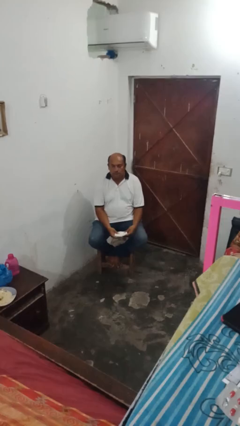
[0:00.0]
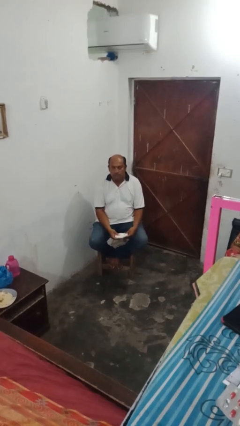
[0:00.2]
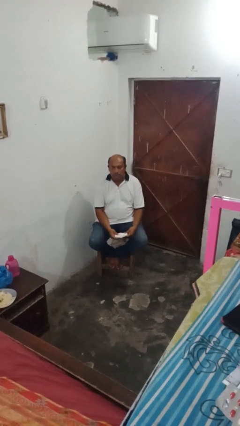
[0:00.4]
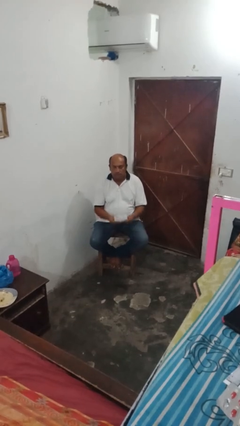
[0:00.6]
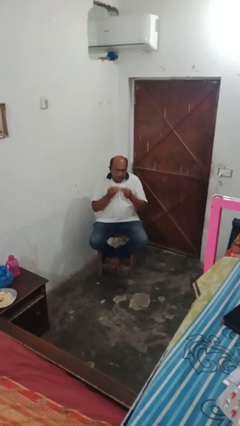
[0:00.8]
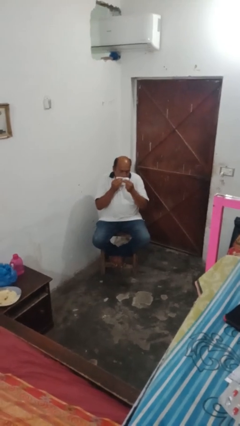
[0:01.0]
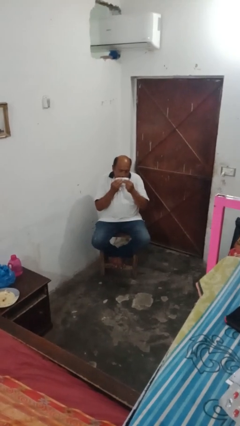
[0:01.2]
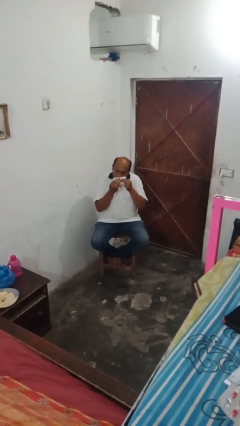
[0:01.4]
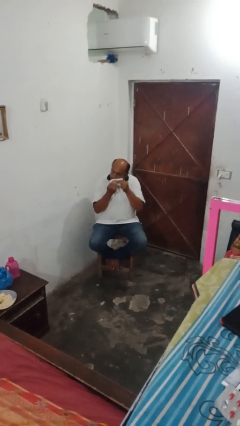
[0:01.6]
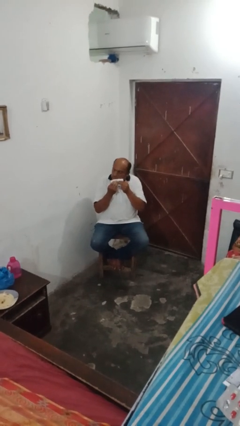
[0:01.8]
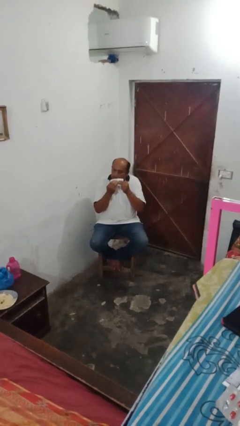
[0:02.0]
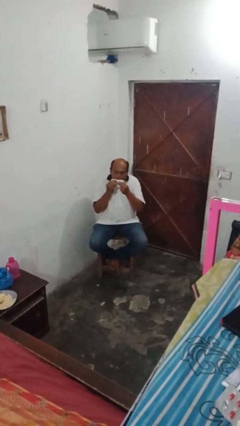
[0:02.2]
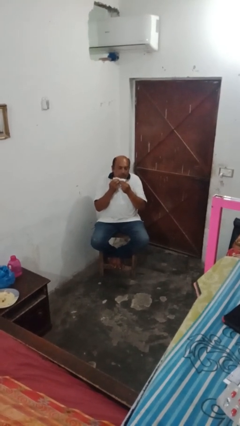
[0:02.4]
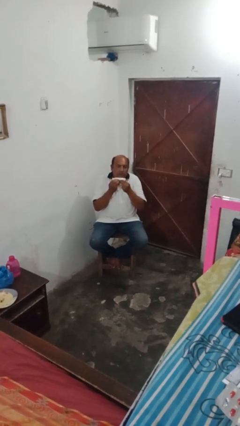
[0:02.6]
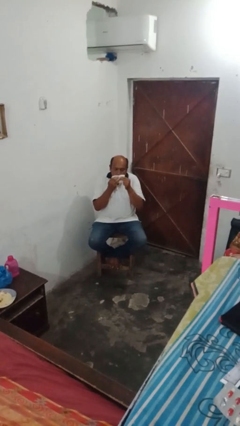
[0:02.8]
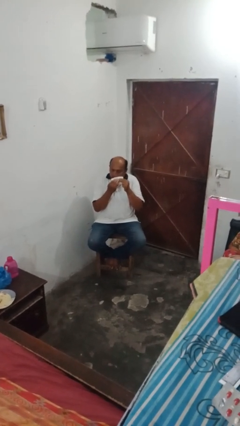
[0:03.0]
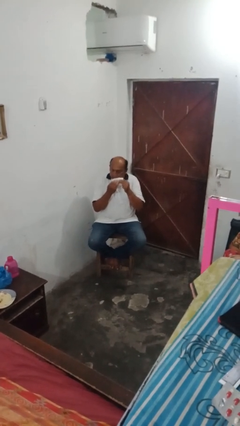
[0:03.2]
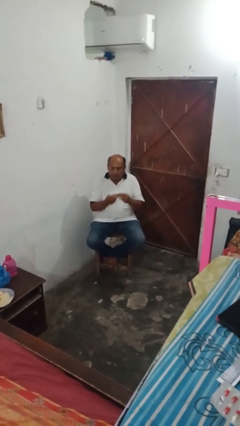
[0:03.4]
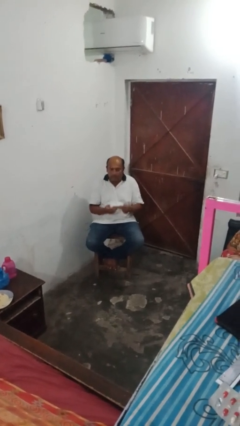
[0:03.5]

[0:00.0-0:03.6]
person wipes mouth with napkin

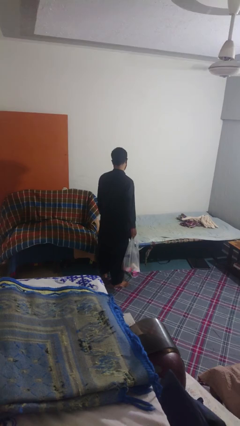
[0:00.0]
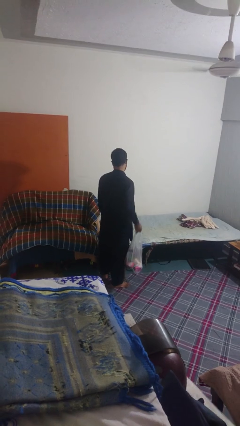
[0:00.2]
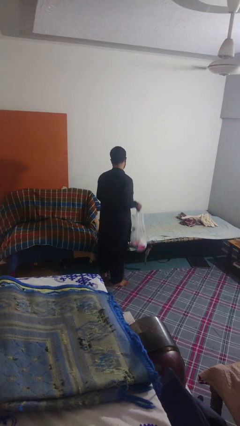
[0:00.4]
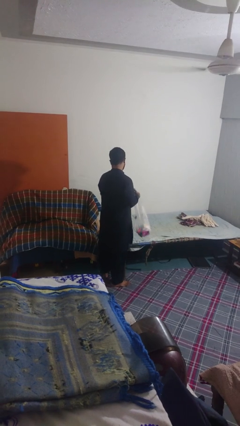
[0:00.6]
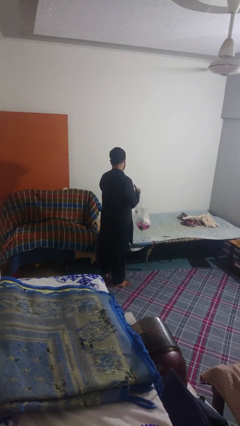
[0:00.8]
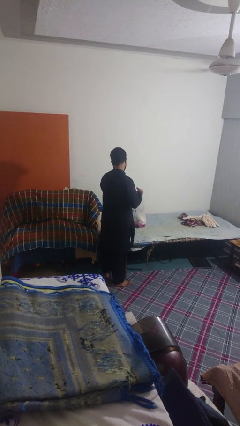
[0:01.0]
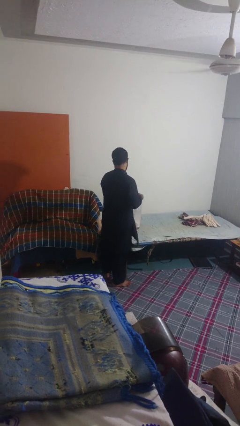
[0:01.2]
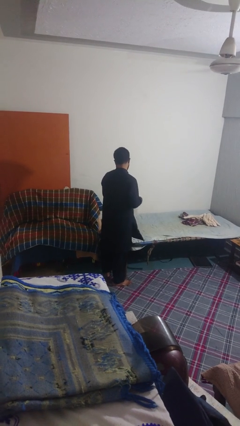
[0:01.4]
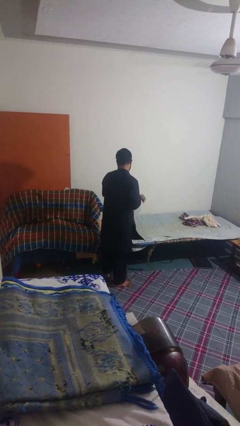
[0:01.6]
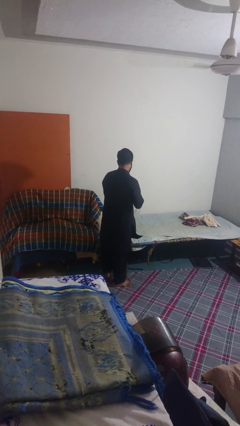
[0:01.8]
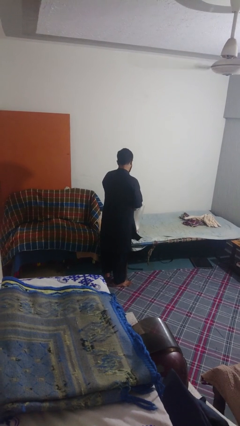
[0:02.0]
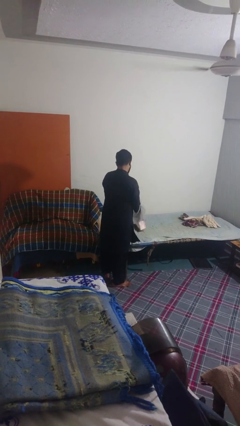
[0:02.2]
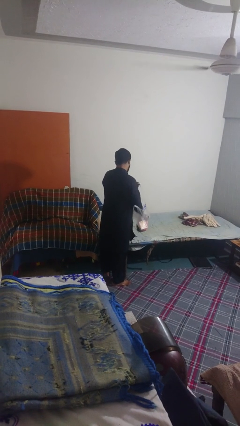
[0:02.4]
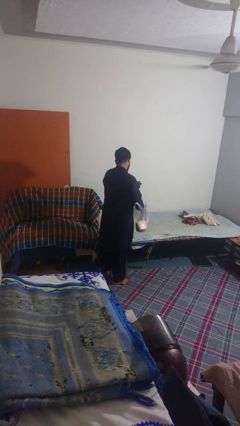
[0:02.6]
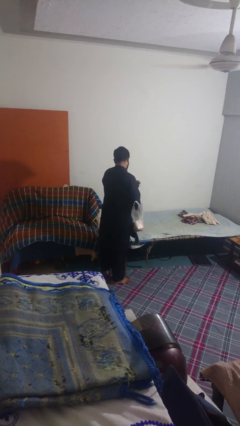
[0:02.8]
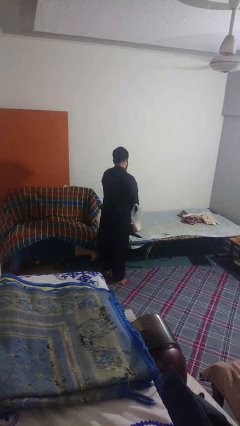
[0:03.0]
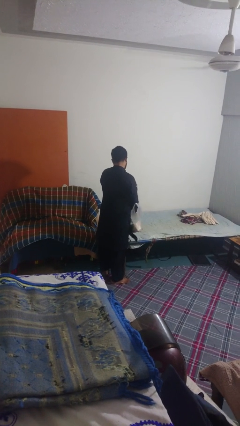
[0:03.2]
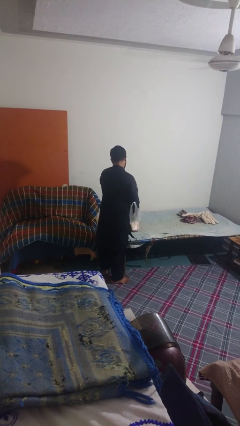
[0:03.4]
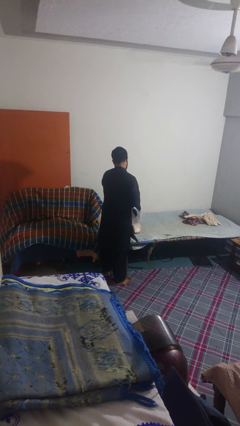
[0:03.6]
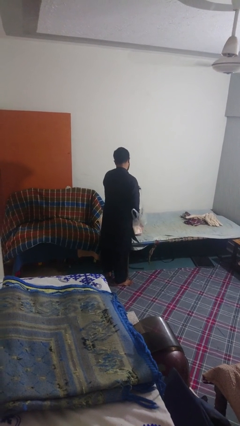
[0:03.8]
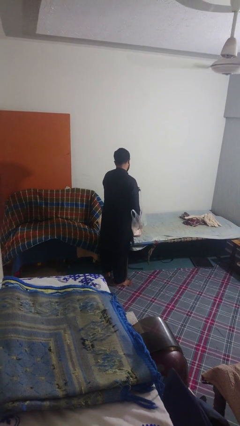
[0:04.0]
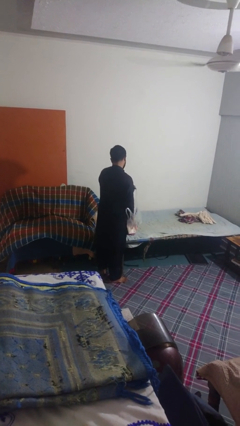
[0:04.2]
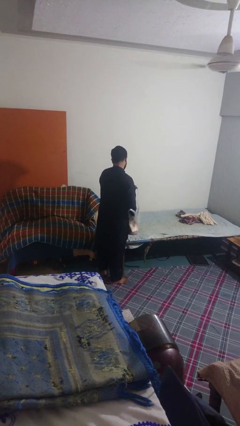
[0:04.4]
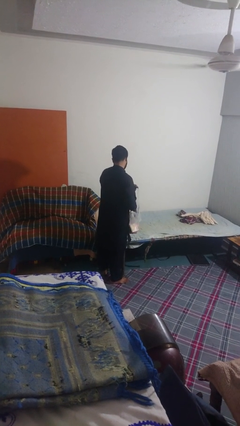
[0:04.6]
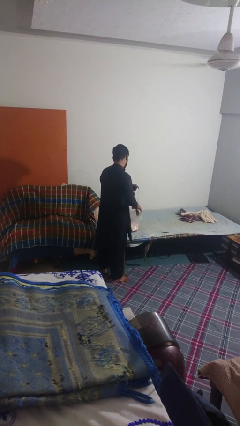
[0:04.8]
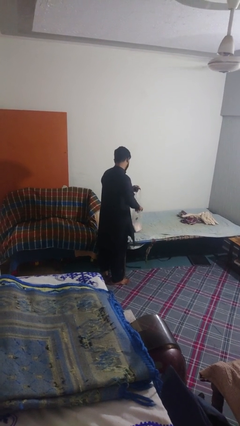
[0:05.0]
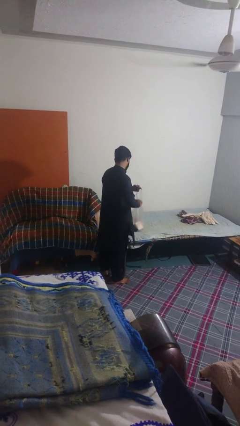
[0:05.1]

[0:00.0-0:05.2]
person searches in bag

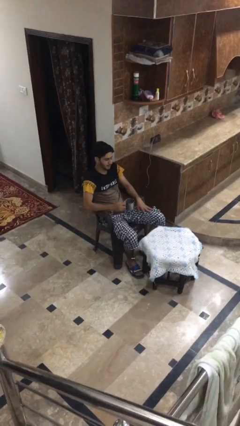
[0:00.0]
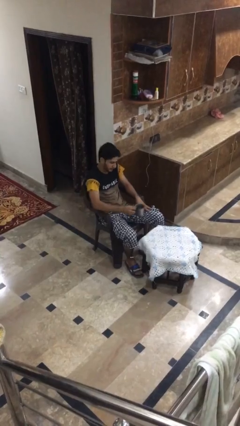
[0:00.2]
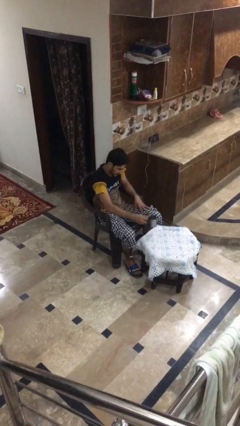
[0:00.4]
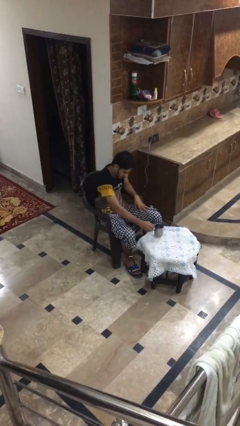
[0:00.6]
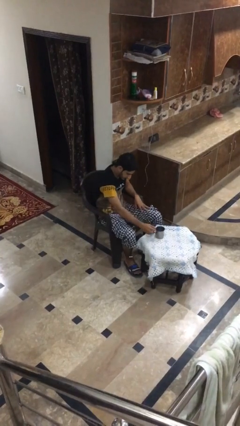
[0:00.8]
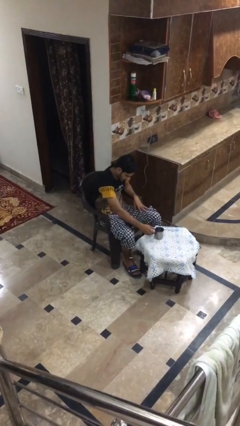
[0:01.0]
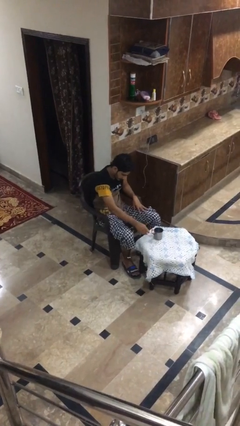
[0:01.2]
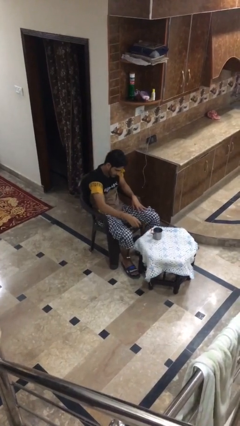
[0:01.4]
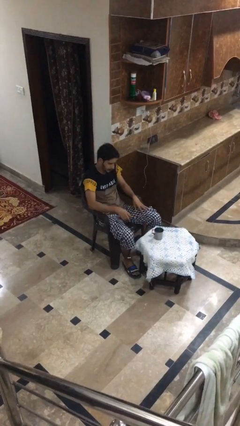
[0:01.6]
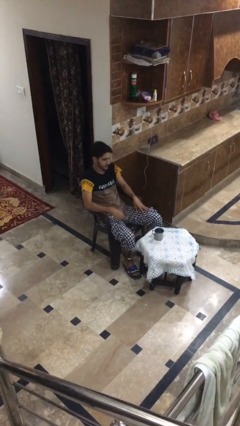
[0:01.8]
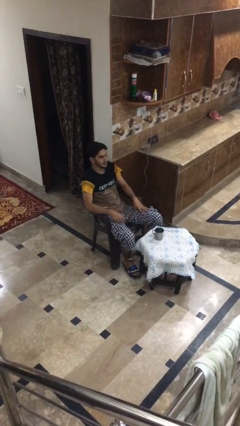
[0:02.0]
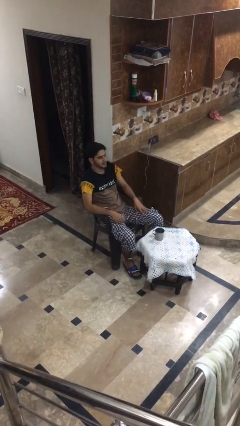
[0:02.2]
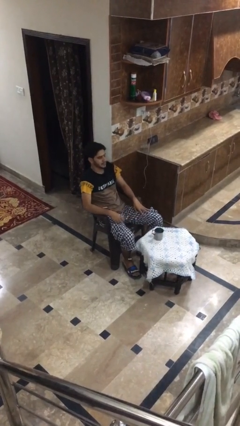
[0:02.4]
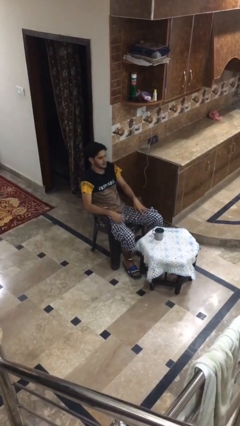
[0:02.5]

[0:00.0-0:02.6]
person puts down object on table

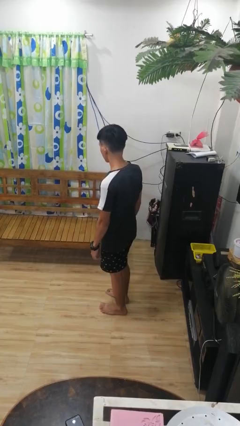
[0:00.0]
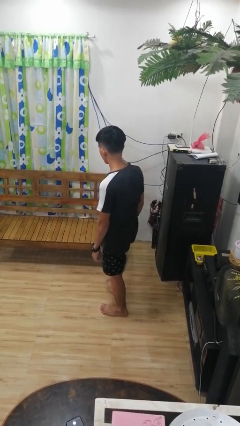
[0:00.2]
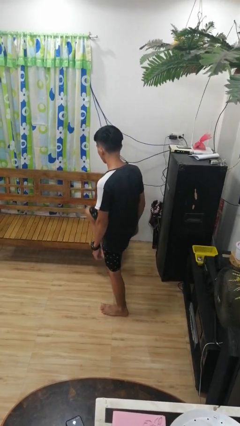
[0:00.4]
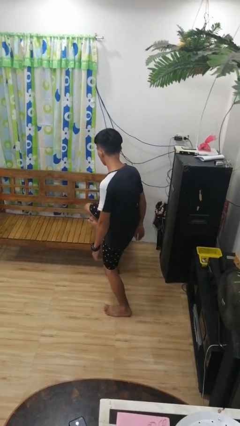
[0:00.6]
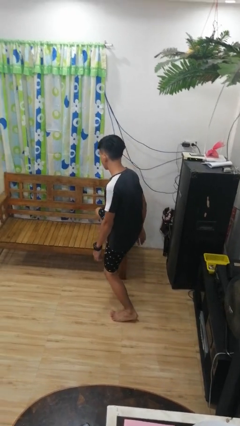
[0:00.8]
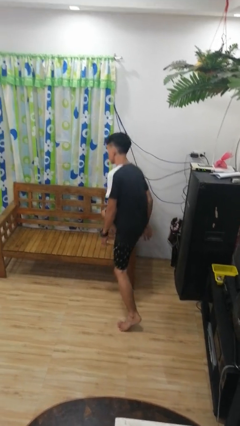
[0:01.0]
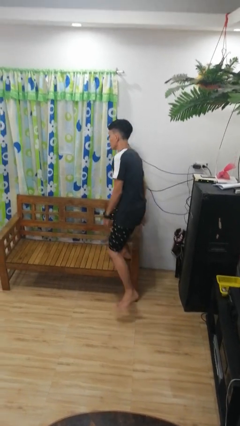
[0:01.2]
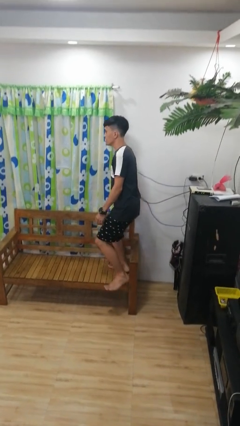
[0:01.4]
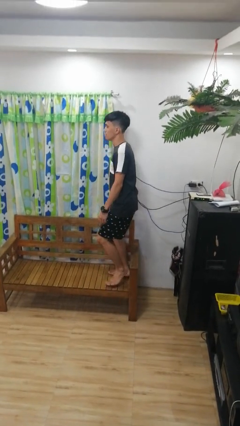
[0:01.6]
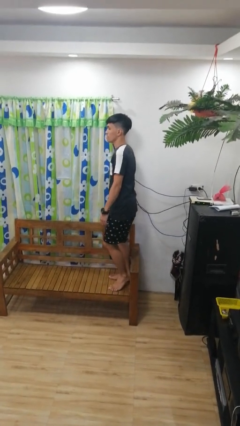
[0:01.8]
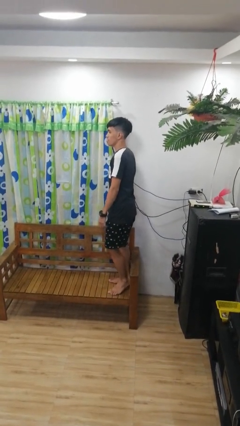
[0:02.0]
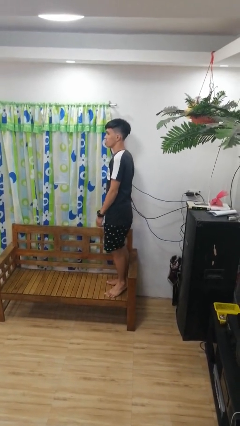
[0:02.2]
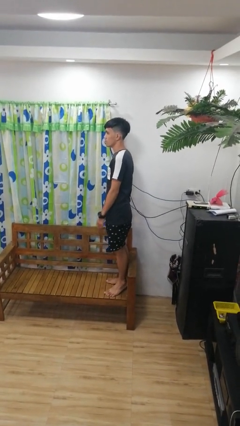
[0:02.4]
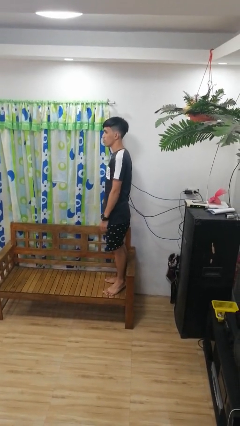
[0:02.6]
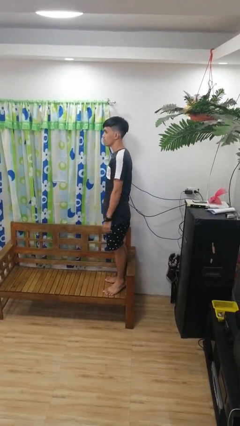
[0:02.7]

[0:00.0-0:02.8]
person climbs on couch

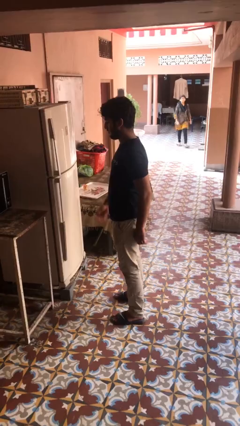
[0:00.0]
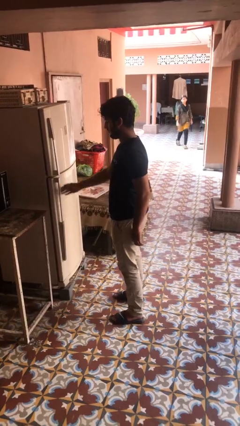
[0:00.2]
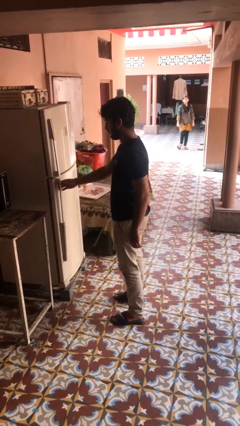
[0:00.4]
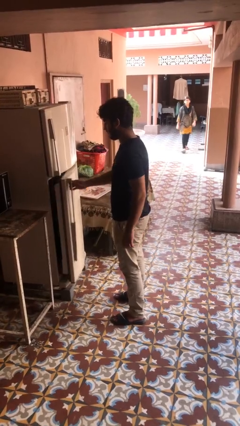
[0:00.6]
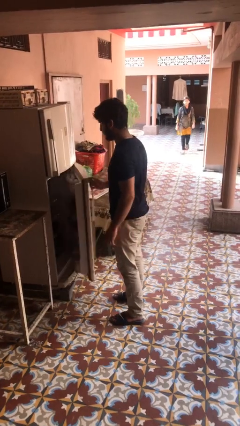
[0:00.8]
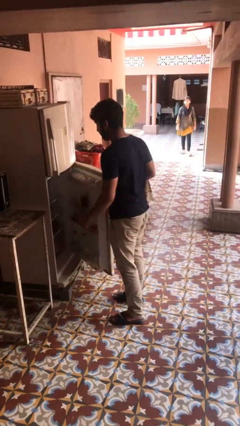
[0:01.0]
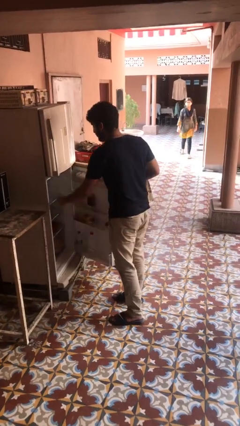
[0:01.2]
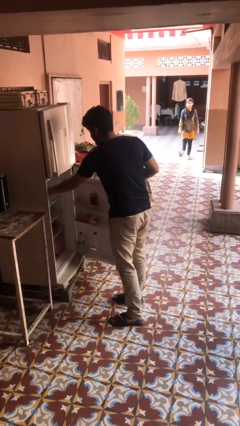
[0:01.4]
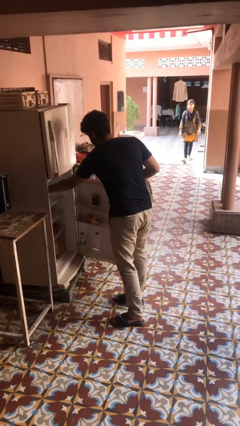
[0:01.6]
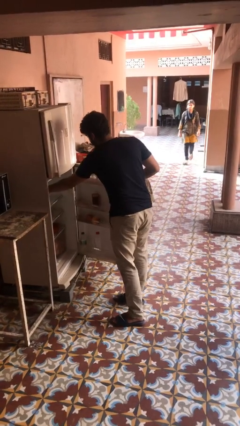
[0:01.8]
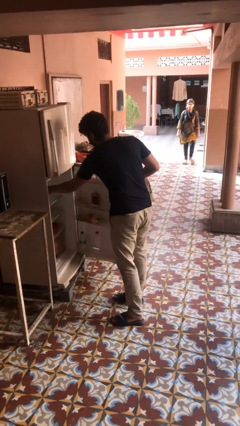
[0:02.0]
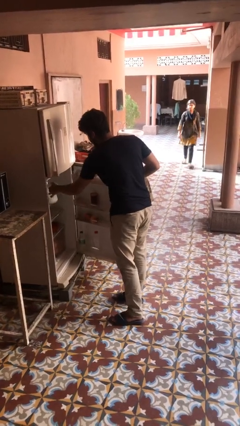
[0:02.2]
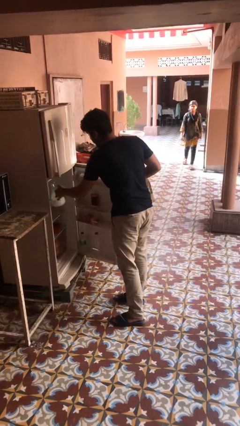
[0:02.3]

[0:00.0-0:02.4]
person takes object from refrigerator

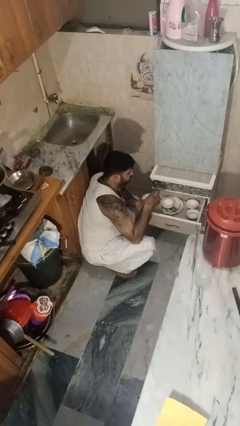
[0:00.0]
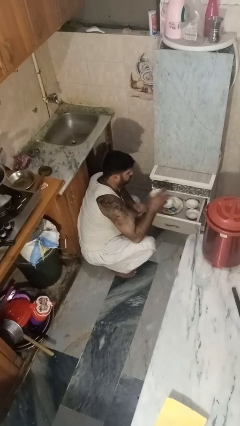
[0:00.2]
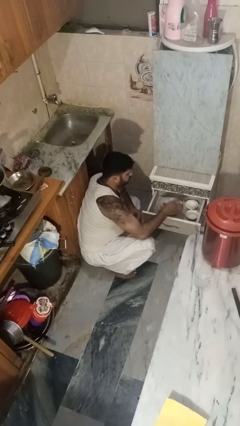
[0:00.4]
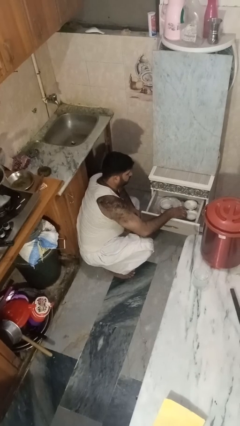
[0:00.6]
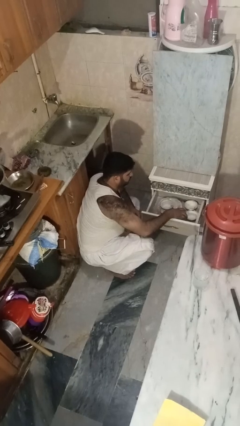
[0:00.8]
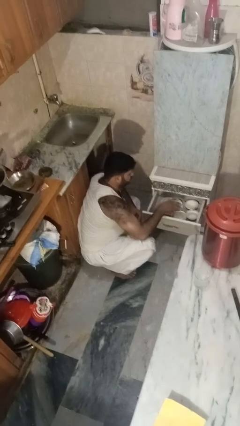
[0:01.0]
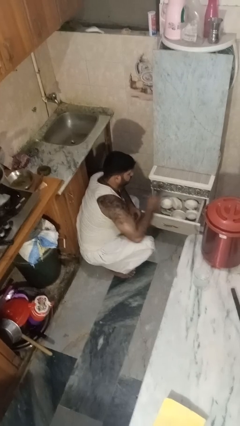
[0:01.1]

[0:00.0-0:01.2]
person puts object into kitchen drawer
